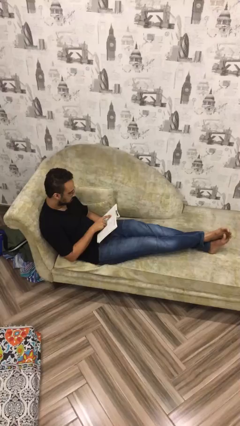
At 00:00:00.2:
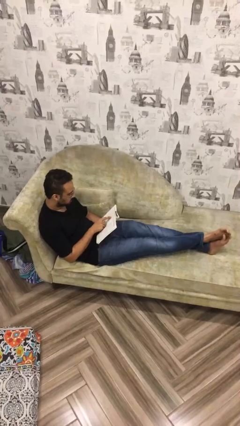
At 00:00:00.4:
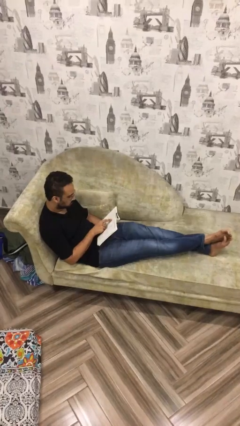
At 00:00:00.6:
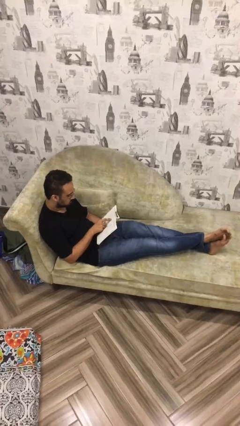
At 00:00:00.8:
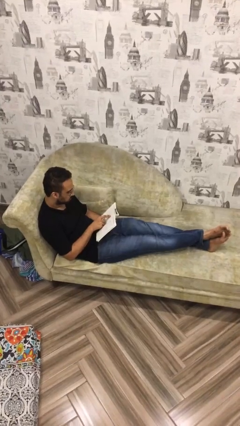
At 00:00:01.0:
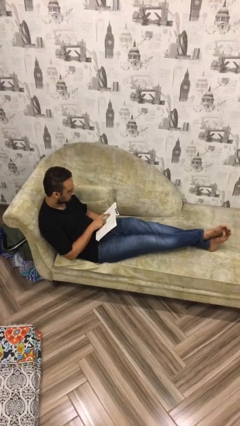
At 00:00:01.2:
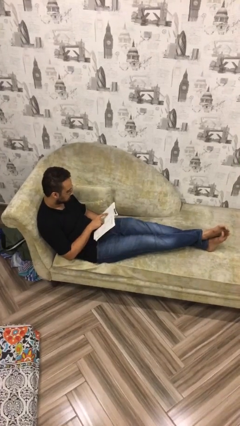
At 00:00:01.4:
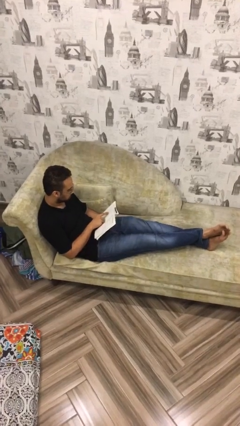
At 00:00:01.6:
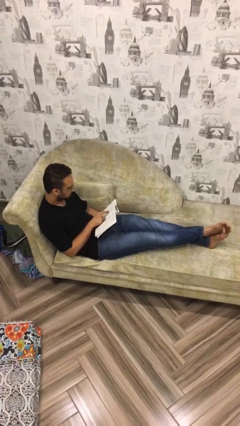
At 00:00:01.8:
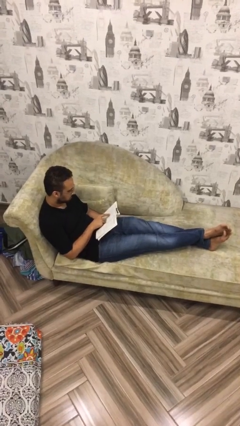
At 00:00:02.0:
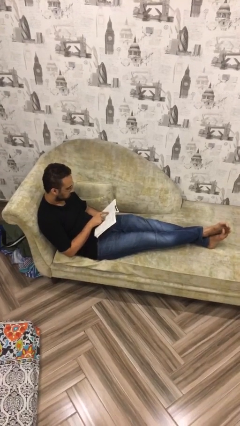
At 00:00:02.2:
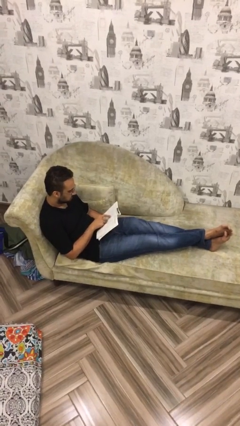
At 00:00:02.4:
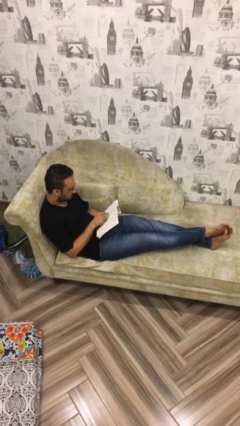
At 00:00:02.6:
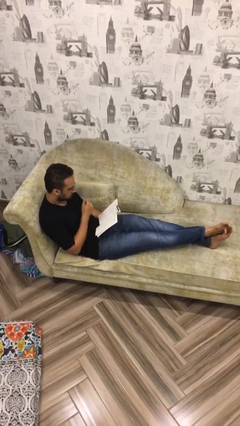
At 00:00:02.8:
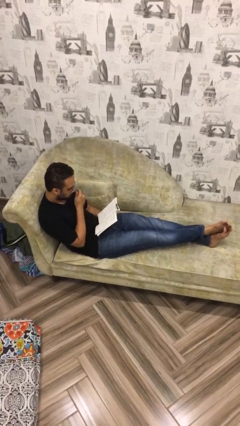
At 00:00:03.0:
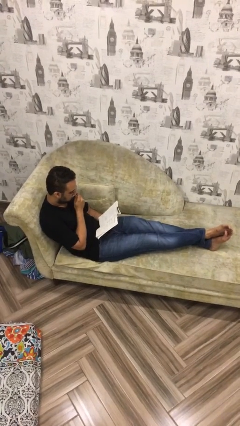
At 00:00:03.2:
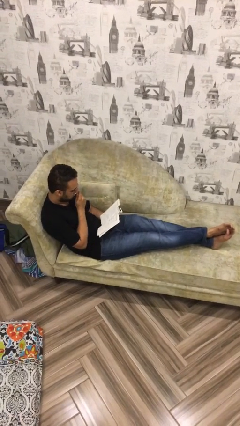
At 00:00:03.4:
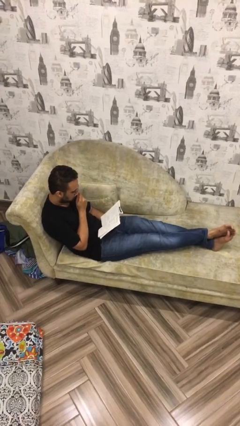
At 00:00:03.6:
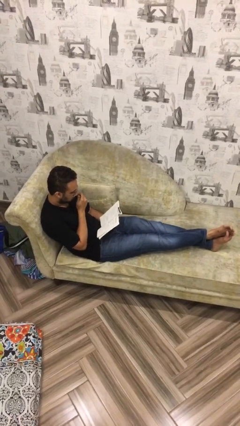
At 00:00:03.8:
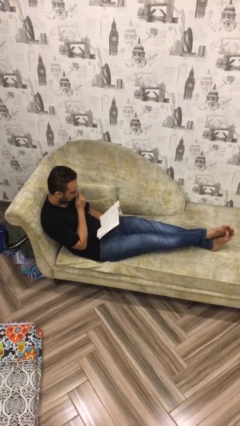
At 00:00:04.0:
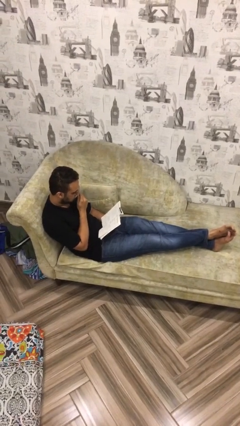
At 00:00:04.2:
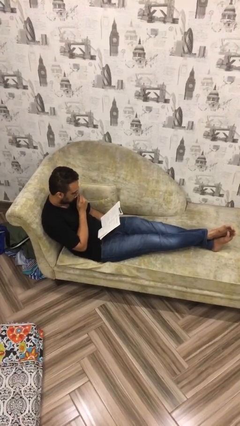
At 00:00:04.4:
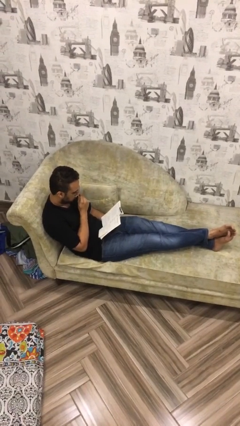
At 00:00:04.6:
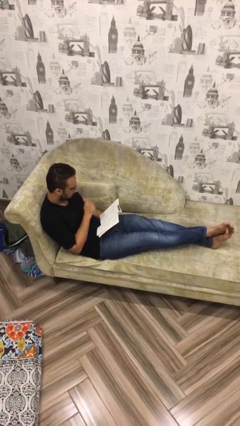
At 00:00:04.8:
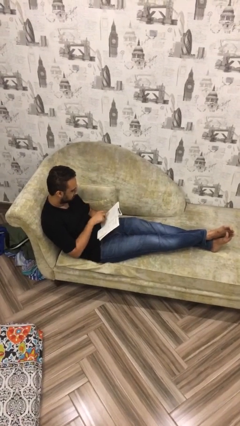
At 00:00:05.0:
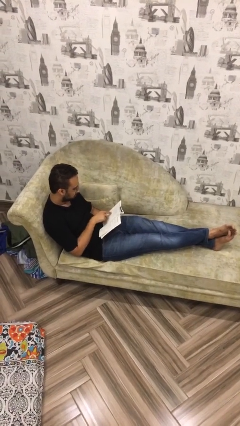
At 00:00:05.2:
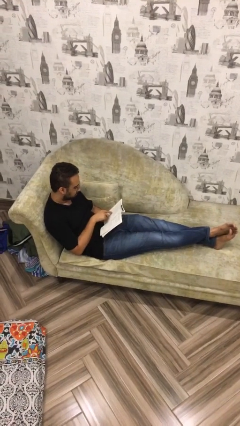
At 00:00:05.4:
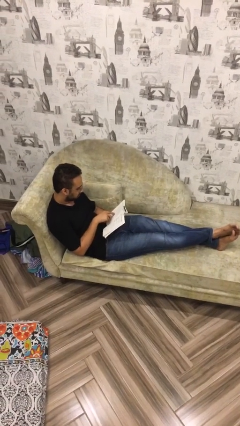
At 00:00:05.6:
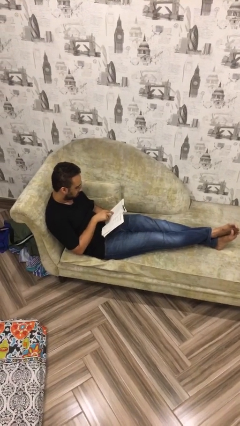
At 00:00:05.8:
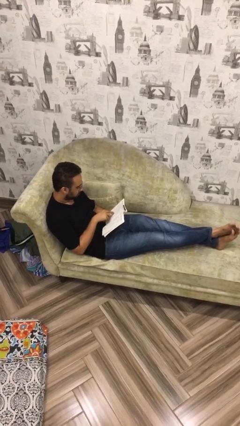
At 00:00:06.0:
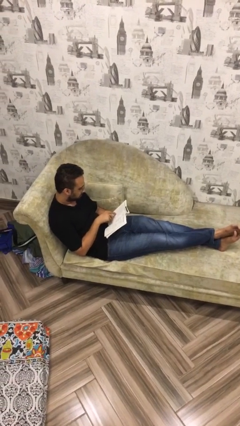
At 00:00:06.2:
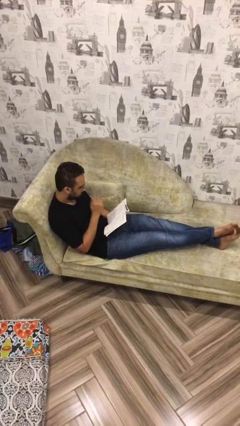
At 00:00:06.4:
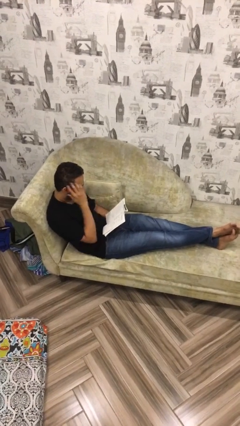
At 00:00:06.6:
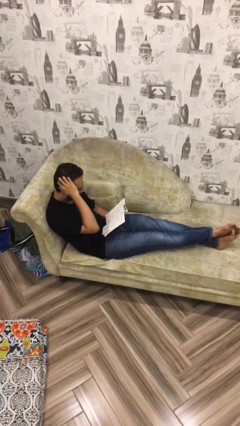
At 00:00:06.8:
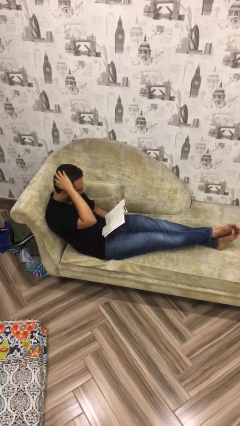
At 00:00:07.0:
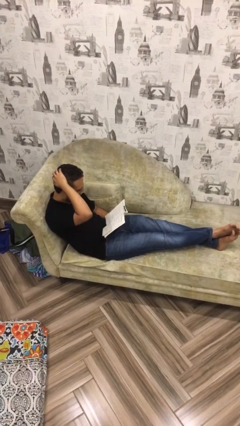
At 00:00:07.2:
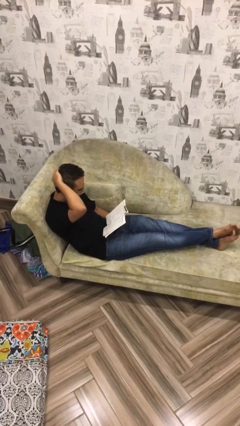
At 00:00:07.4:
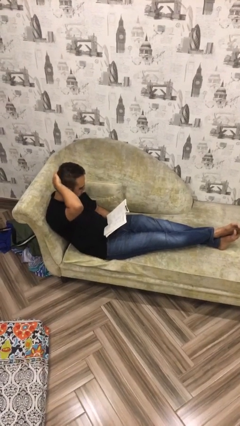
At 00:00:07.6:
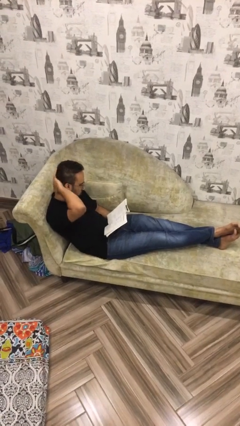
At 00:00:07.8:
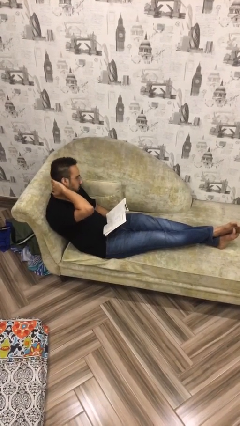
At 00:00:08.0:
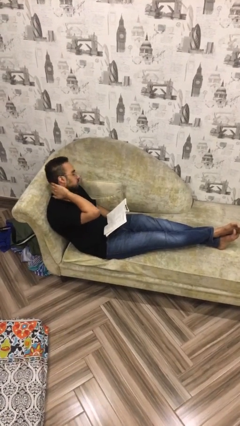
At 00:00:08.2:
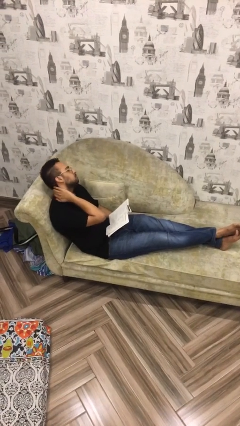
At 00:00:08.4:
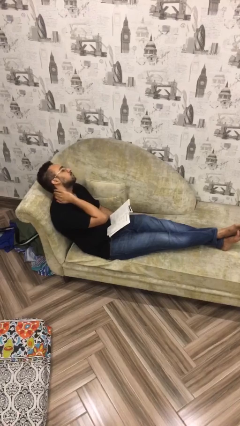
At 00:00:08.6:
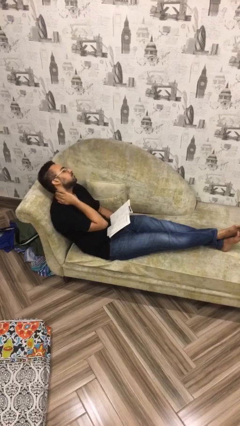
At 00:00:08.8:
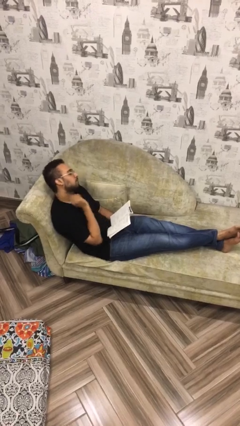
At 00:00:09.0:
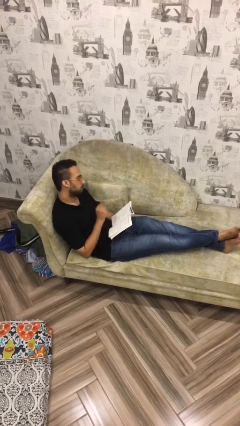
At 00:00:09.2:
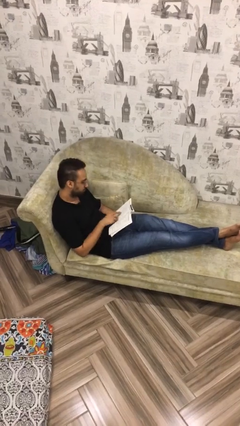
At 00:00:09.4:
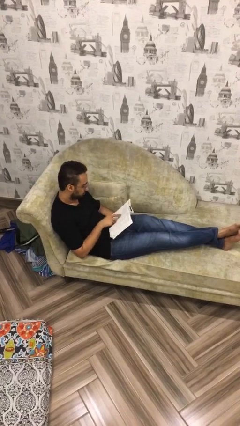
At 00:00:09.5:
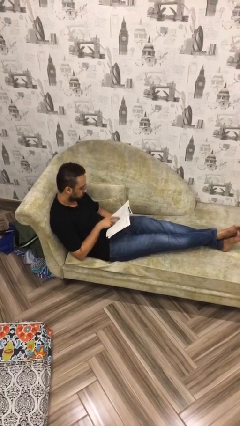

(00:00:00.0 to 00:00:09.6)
person reads document

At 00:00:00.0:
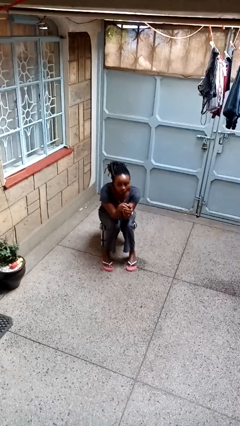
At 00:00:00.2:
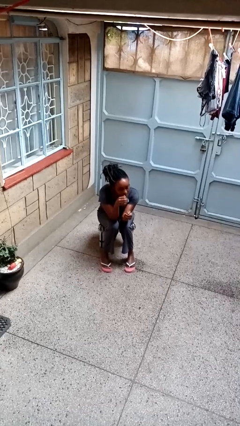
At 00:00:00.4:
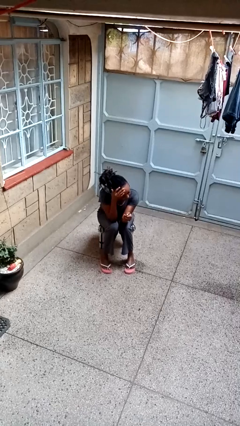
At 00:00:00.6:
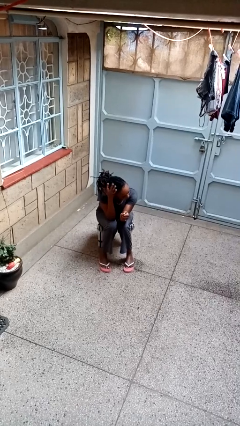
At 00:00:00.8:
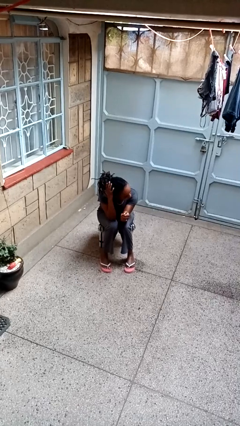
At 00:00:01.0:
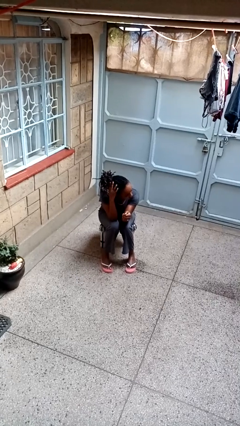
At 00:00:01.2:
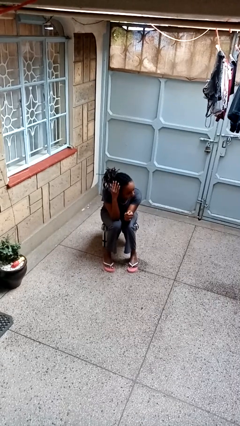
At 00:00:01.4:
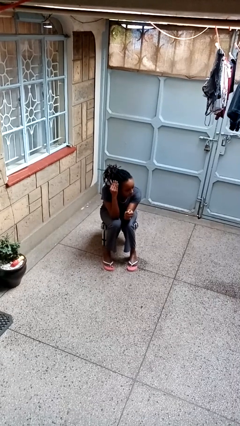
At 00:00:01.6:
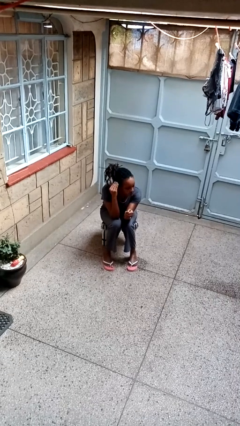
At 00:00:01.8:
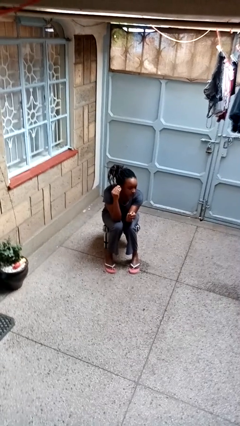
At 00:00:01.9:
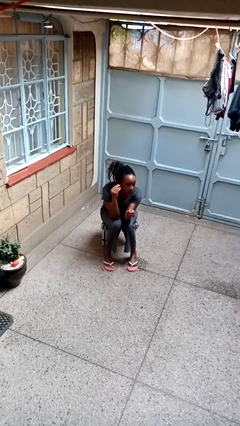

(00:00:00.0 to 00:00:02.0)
person strokes hair

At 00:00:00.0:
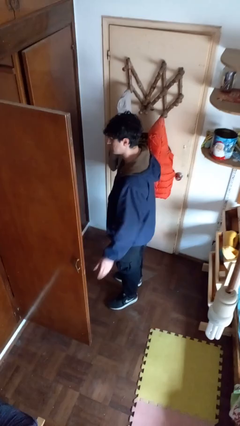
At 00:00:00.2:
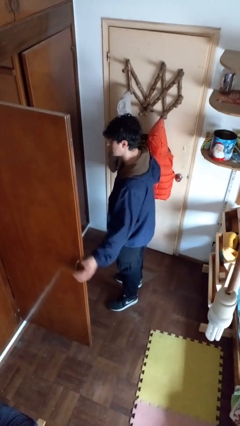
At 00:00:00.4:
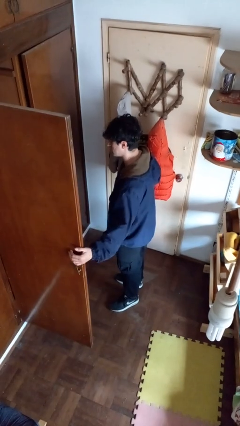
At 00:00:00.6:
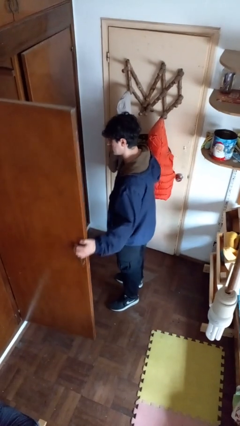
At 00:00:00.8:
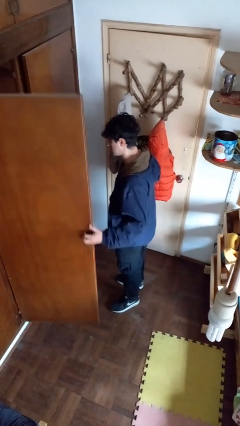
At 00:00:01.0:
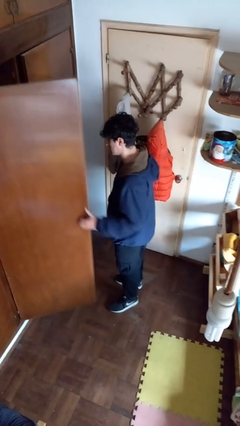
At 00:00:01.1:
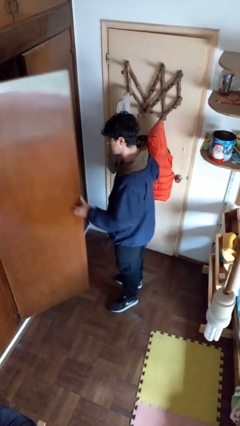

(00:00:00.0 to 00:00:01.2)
person closes closet door

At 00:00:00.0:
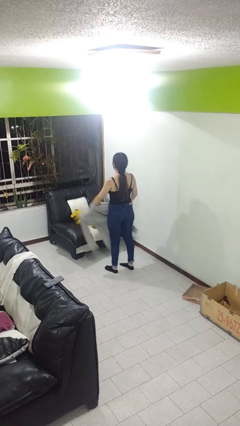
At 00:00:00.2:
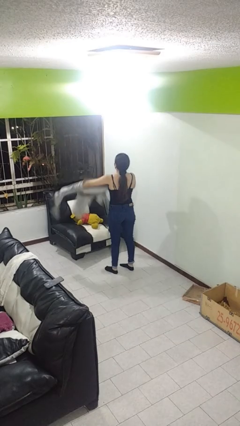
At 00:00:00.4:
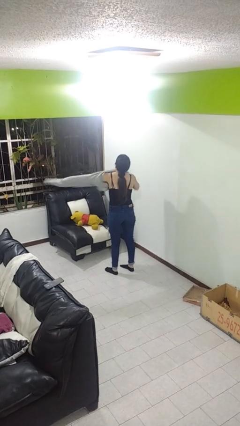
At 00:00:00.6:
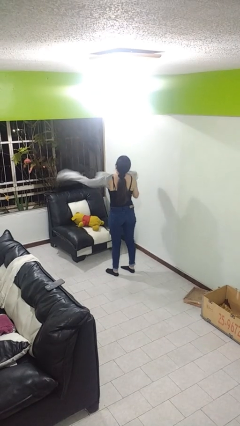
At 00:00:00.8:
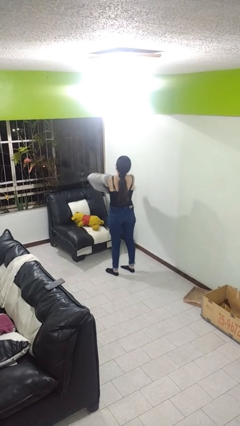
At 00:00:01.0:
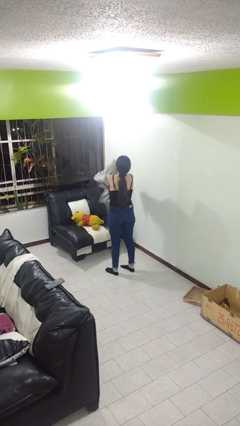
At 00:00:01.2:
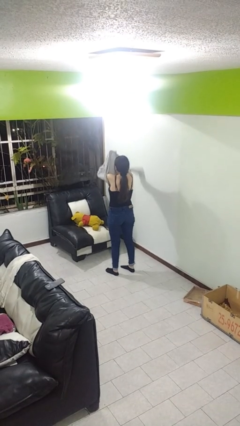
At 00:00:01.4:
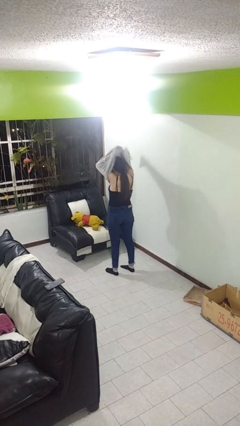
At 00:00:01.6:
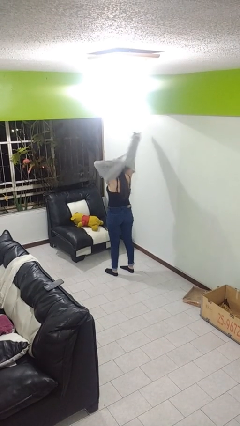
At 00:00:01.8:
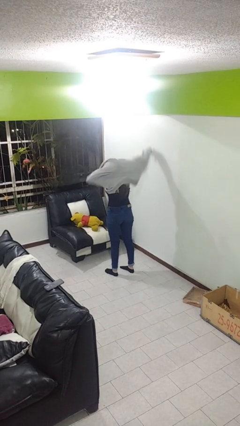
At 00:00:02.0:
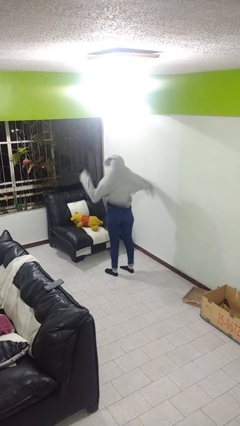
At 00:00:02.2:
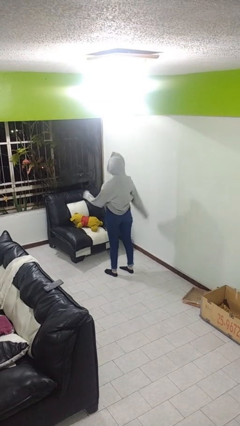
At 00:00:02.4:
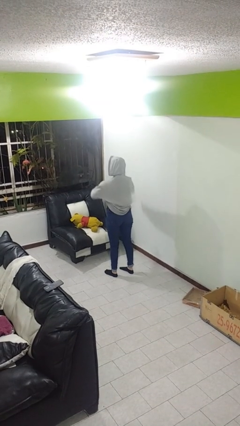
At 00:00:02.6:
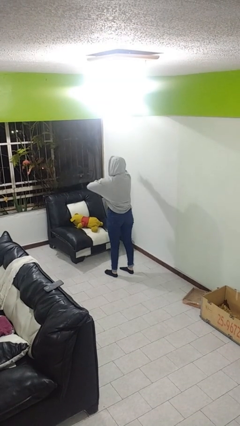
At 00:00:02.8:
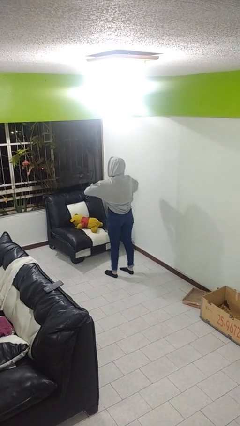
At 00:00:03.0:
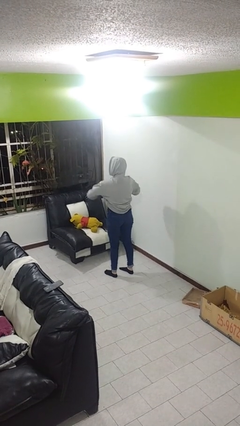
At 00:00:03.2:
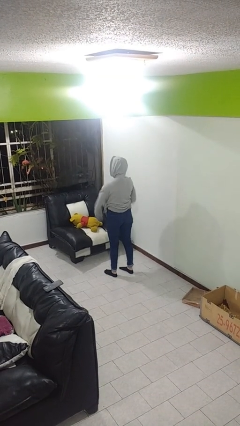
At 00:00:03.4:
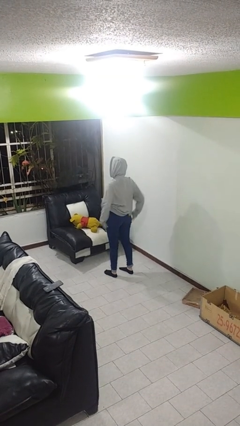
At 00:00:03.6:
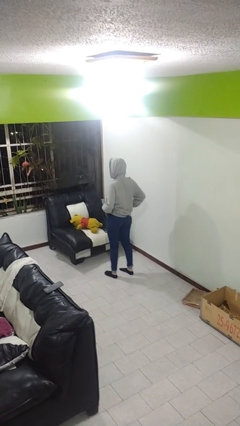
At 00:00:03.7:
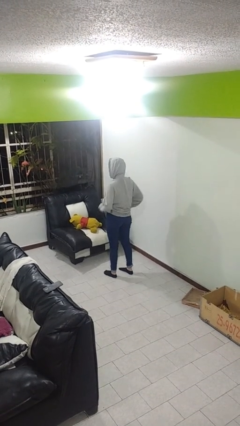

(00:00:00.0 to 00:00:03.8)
person puts on hoodie

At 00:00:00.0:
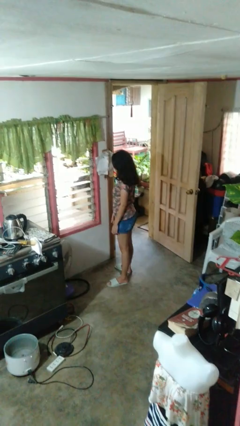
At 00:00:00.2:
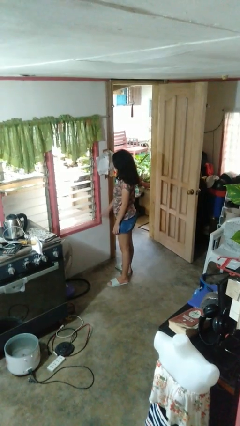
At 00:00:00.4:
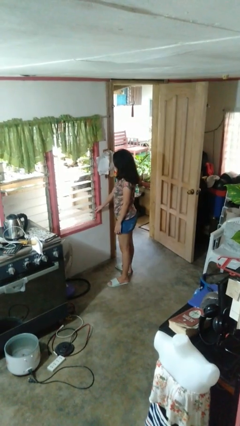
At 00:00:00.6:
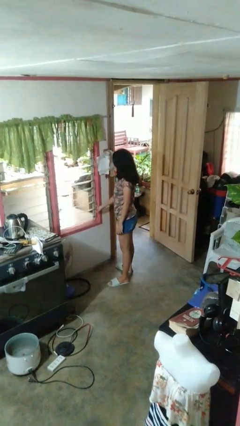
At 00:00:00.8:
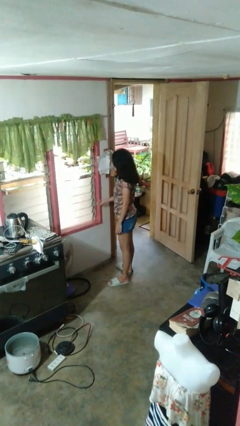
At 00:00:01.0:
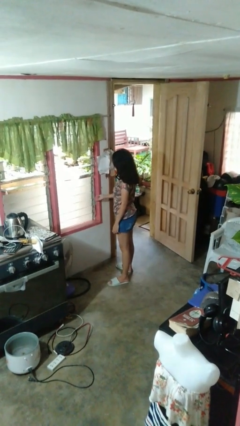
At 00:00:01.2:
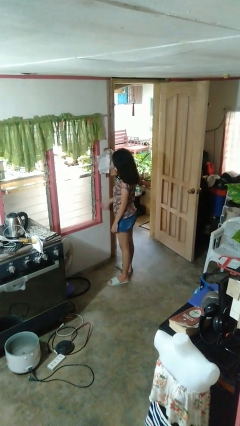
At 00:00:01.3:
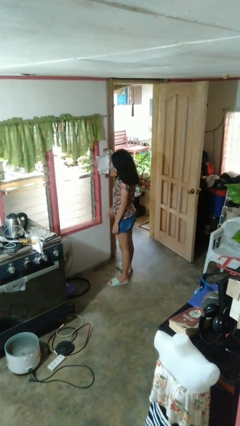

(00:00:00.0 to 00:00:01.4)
person closes home window
